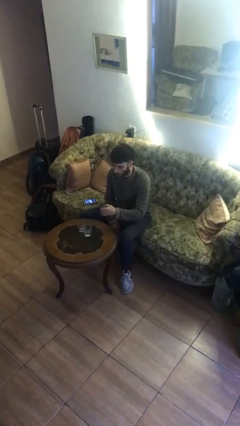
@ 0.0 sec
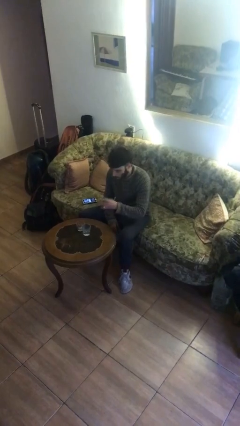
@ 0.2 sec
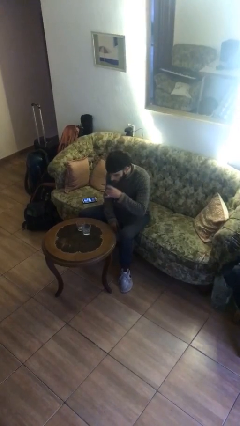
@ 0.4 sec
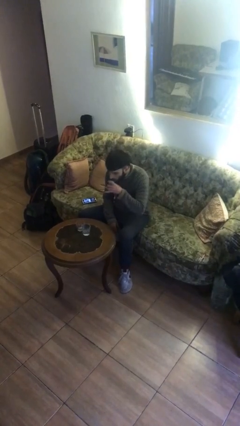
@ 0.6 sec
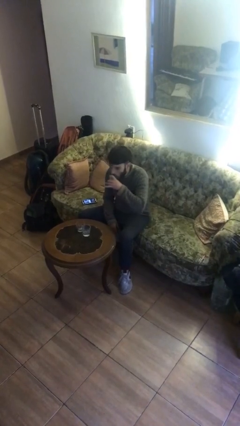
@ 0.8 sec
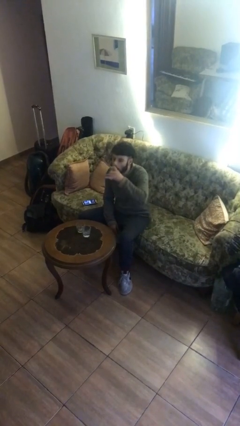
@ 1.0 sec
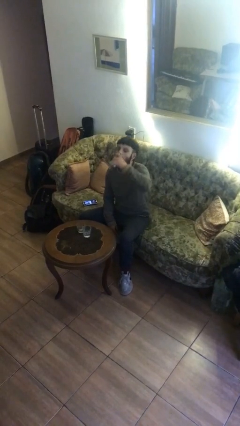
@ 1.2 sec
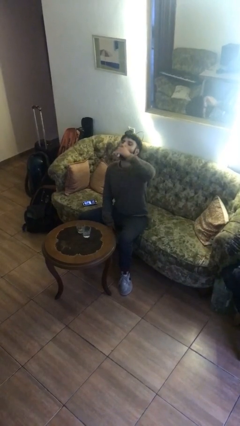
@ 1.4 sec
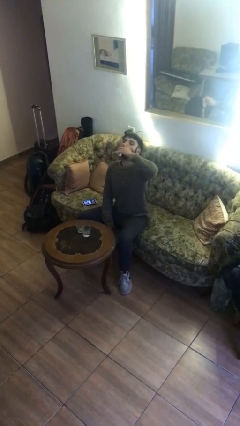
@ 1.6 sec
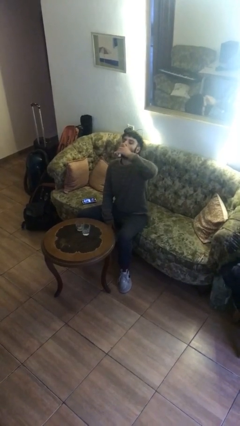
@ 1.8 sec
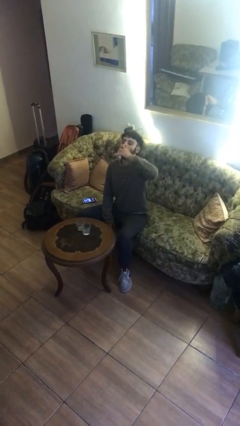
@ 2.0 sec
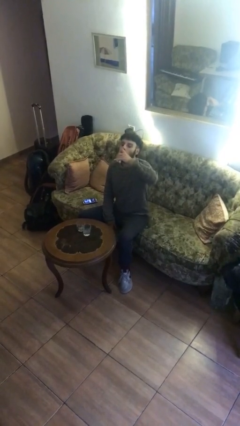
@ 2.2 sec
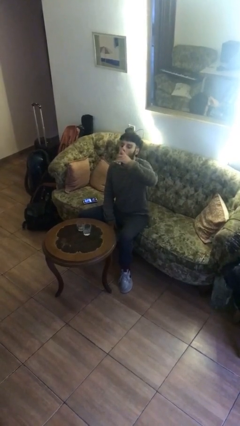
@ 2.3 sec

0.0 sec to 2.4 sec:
person drinks from shotglass

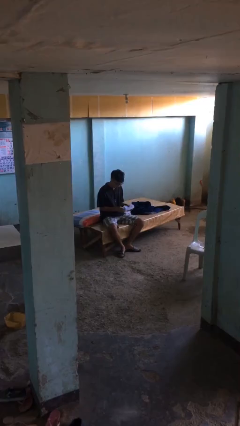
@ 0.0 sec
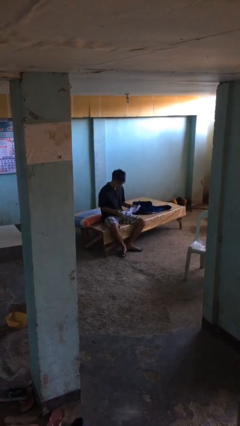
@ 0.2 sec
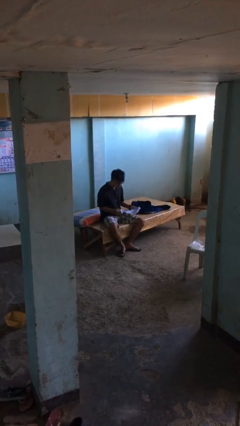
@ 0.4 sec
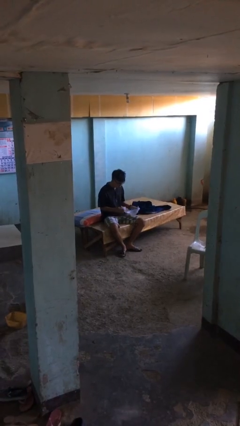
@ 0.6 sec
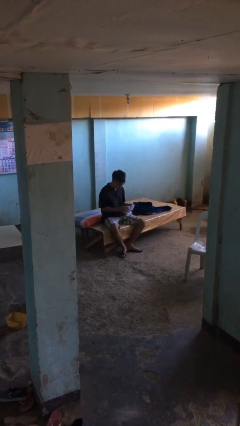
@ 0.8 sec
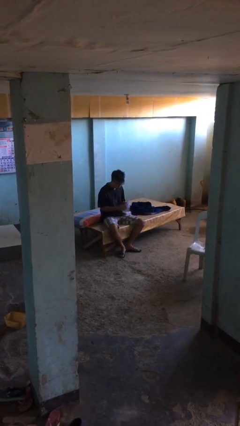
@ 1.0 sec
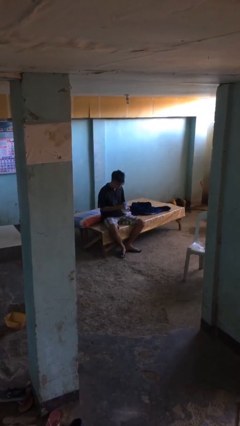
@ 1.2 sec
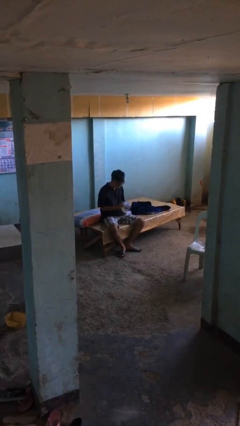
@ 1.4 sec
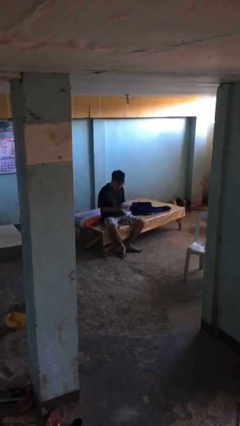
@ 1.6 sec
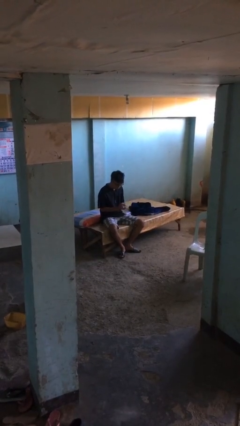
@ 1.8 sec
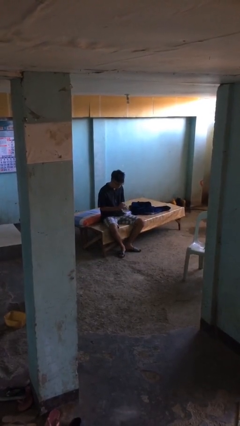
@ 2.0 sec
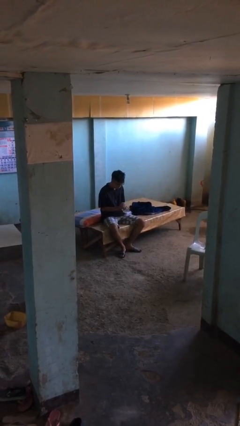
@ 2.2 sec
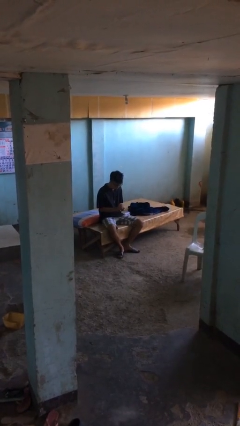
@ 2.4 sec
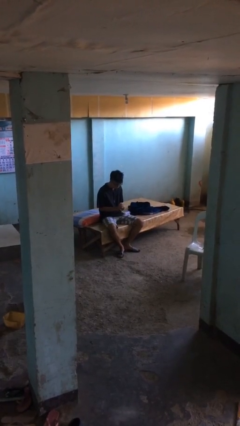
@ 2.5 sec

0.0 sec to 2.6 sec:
person crumples paper

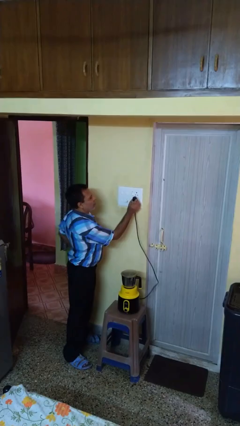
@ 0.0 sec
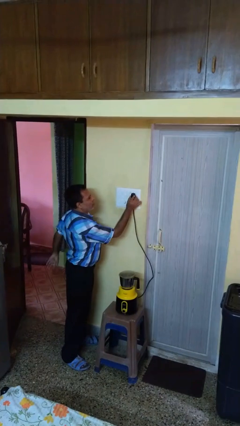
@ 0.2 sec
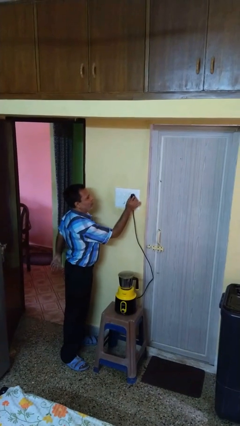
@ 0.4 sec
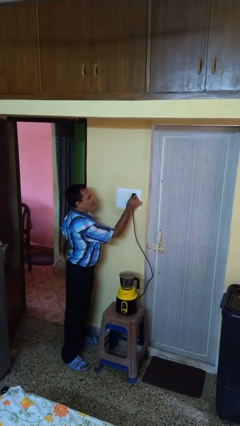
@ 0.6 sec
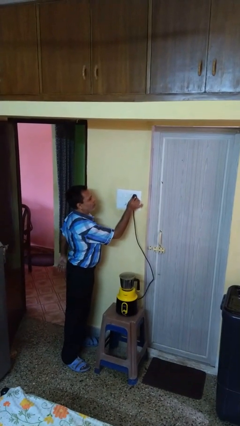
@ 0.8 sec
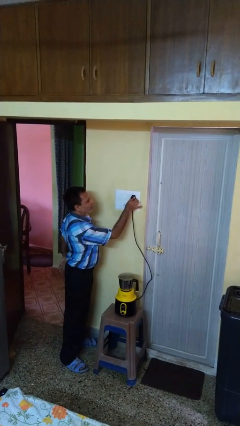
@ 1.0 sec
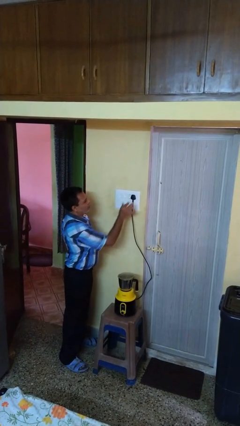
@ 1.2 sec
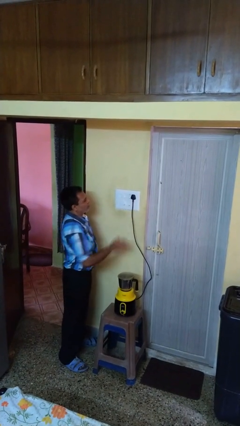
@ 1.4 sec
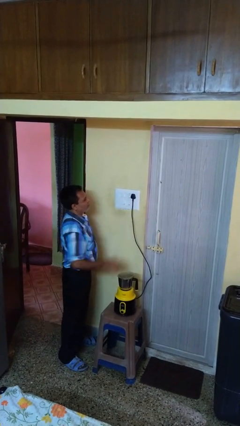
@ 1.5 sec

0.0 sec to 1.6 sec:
person plugs into electrical socket

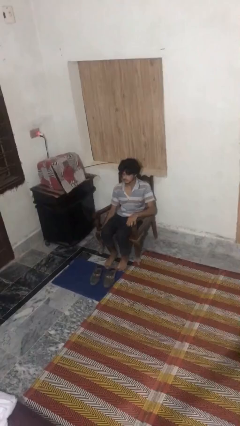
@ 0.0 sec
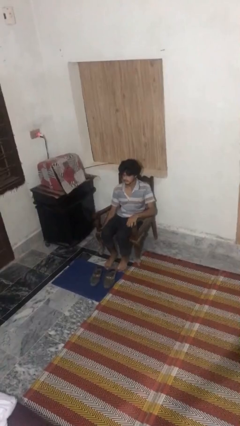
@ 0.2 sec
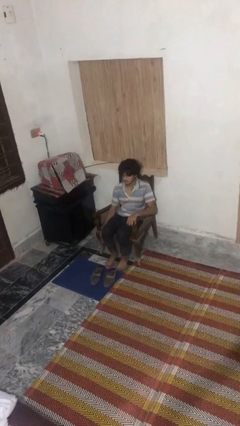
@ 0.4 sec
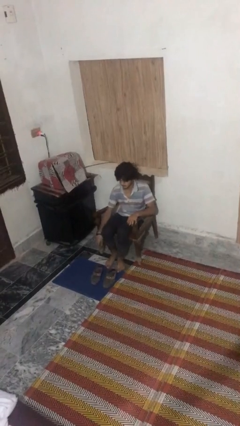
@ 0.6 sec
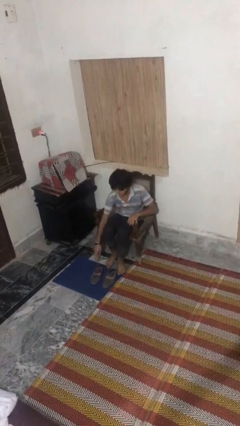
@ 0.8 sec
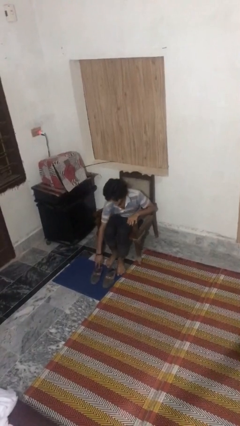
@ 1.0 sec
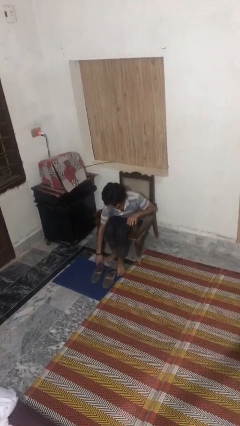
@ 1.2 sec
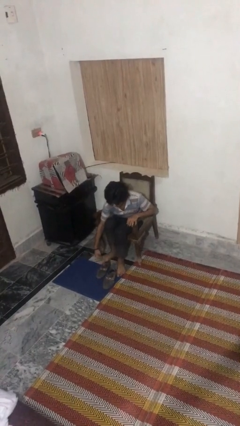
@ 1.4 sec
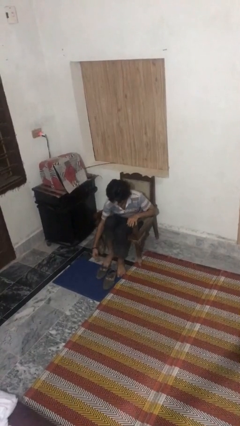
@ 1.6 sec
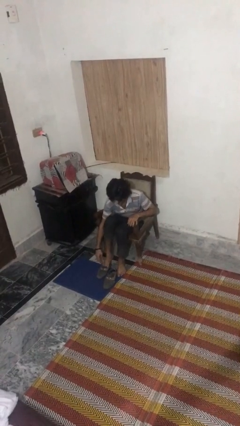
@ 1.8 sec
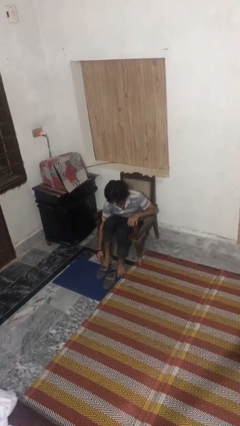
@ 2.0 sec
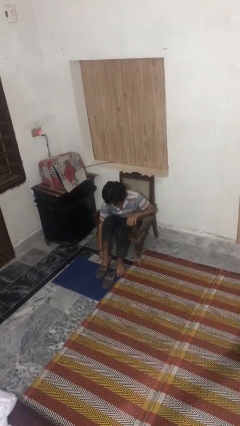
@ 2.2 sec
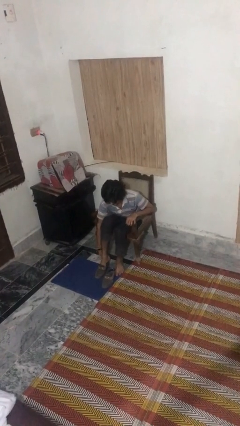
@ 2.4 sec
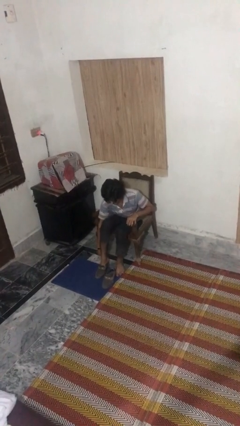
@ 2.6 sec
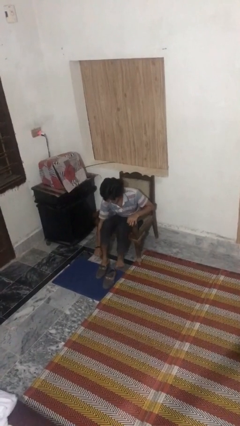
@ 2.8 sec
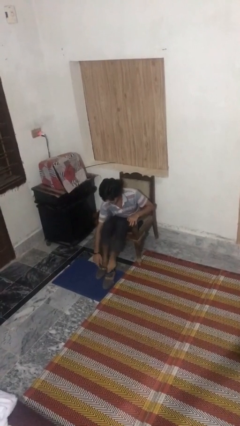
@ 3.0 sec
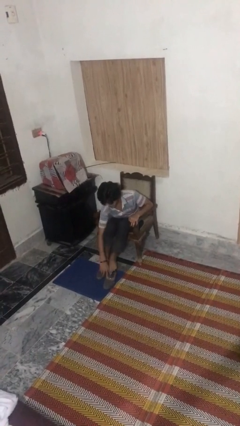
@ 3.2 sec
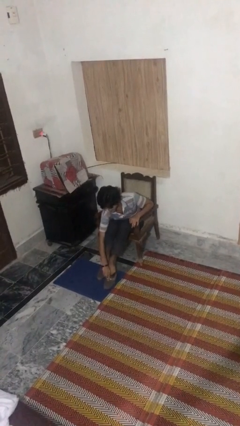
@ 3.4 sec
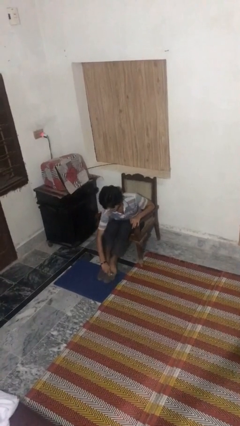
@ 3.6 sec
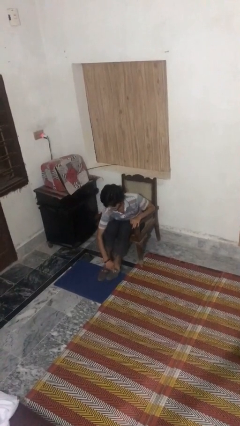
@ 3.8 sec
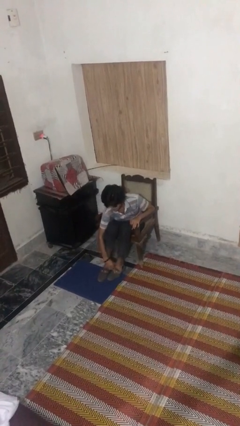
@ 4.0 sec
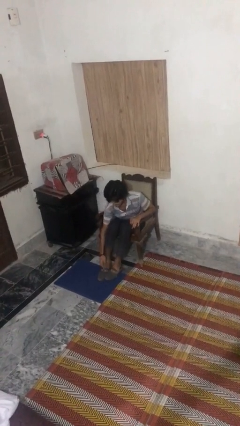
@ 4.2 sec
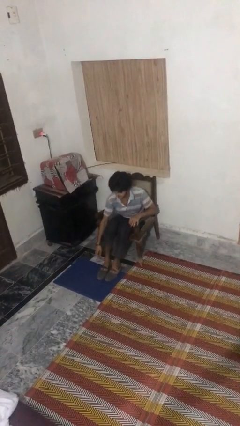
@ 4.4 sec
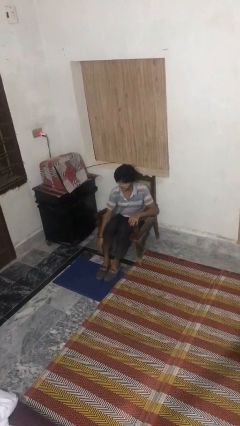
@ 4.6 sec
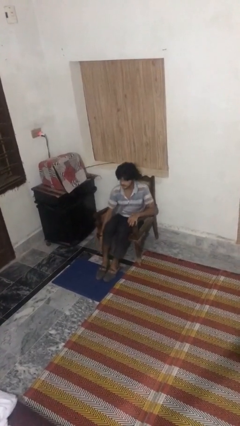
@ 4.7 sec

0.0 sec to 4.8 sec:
person puts on shoes

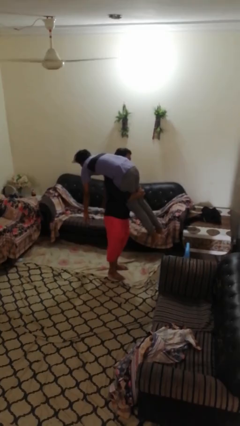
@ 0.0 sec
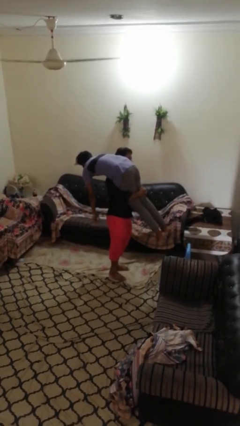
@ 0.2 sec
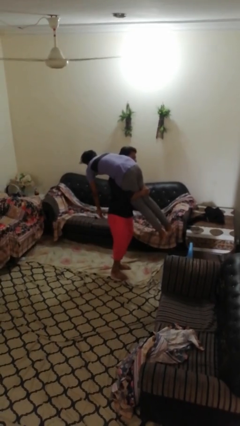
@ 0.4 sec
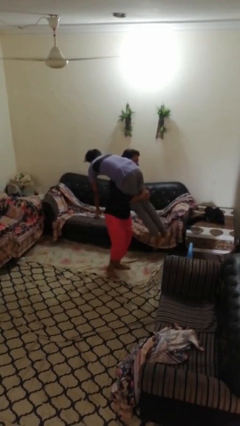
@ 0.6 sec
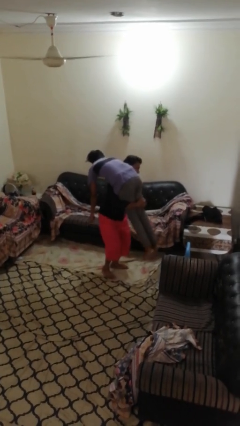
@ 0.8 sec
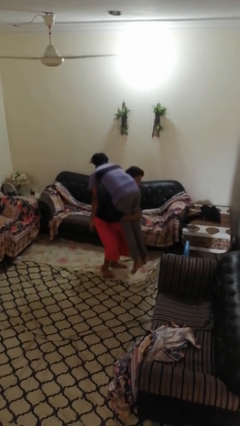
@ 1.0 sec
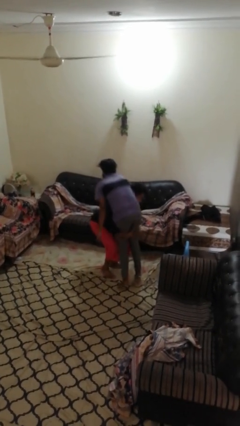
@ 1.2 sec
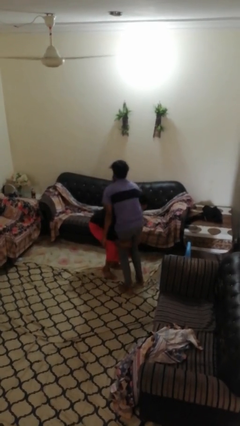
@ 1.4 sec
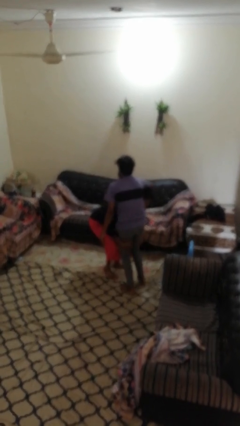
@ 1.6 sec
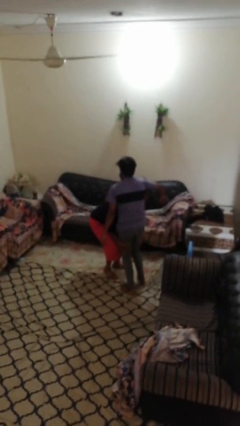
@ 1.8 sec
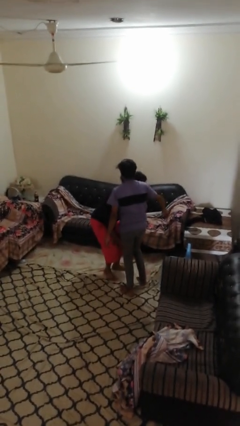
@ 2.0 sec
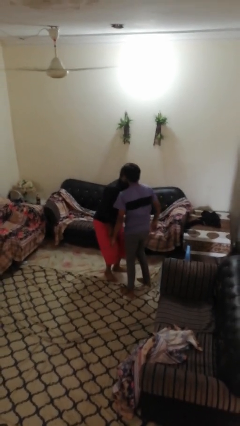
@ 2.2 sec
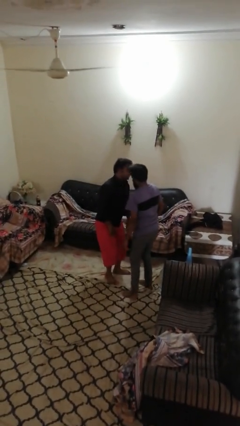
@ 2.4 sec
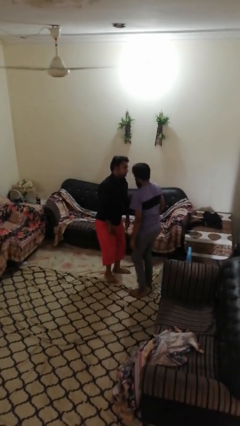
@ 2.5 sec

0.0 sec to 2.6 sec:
person puts down person

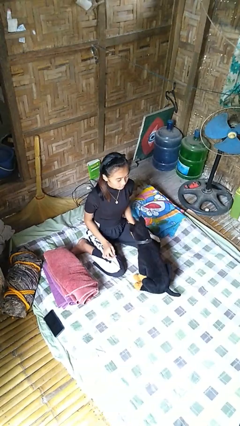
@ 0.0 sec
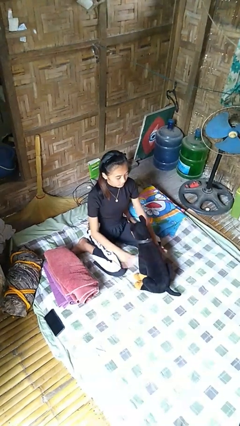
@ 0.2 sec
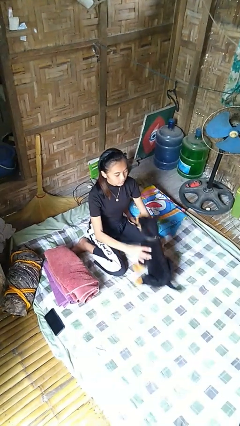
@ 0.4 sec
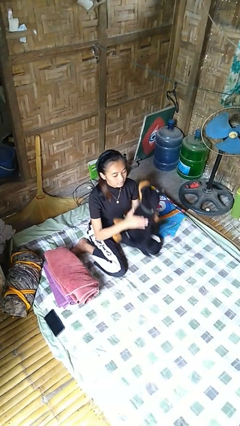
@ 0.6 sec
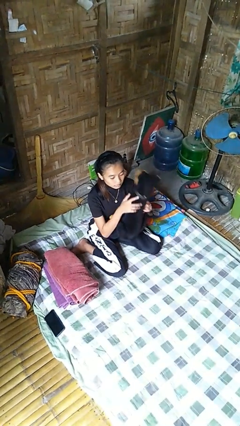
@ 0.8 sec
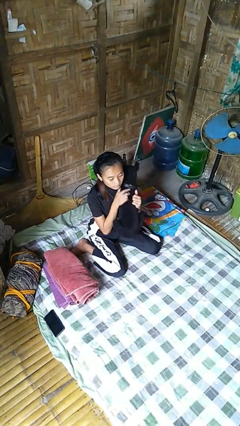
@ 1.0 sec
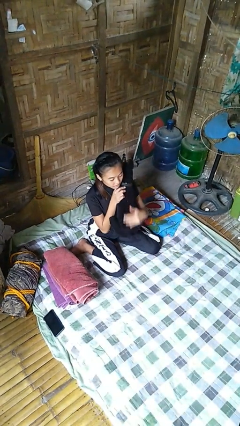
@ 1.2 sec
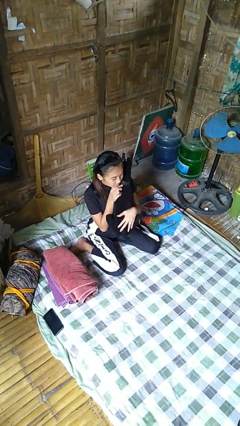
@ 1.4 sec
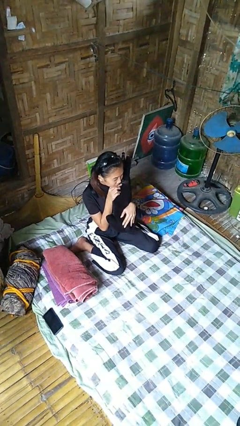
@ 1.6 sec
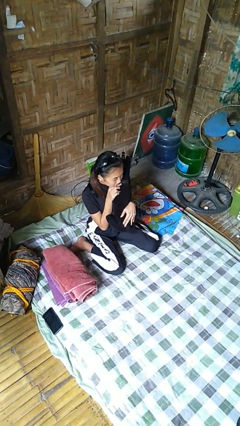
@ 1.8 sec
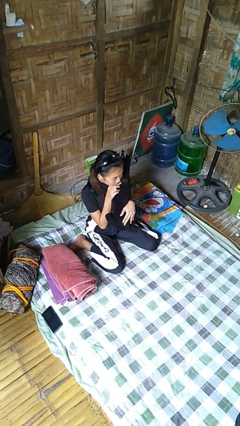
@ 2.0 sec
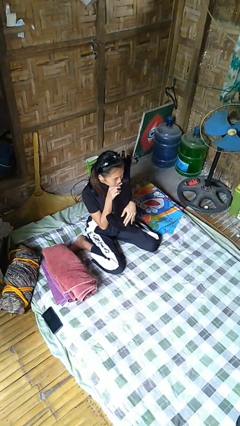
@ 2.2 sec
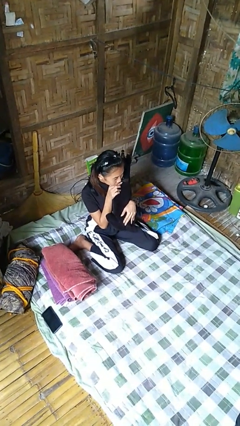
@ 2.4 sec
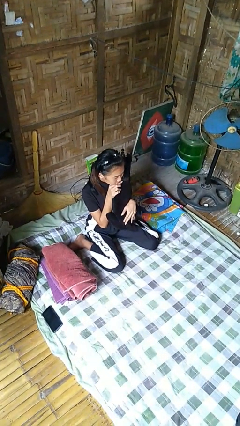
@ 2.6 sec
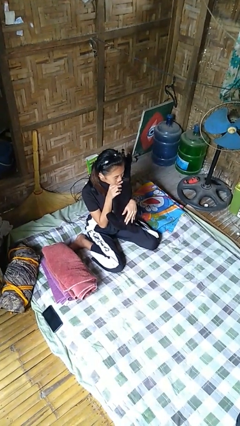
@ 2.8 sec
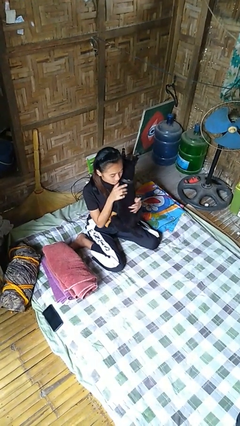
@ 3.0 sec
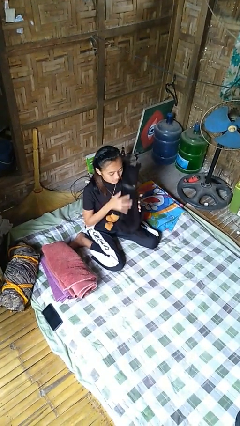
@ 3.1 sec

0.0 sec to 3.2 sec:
person hugs stuffed animal
